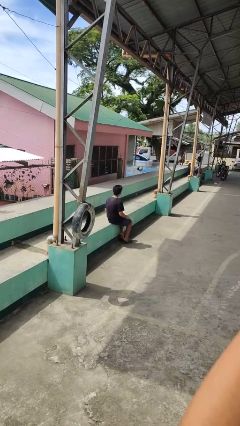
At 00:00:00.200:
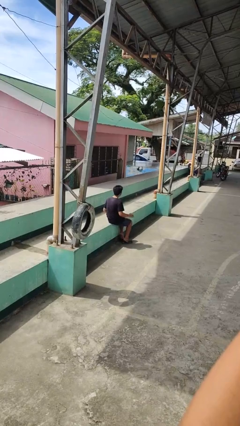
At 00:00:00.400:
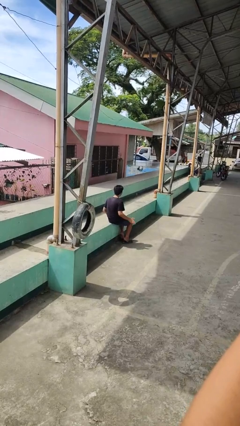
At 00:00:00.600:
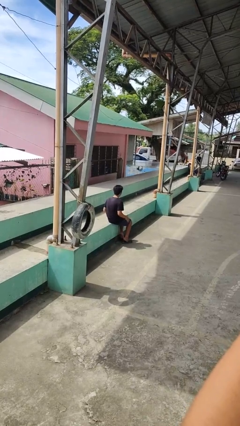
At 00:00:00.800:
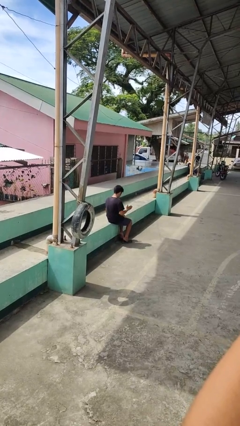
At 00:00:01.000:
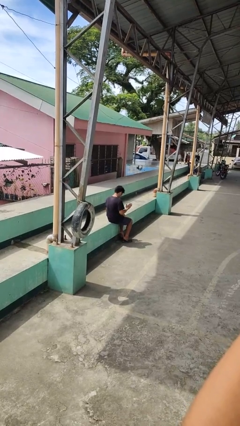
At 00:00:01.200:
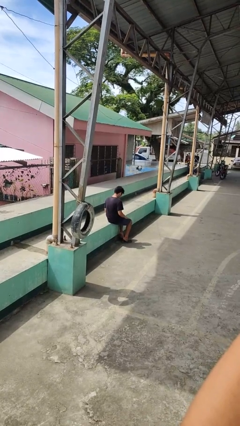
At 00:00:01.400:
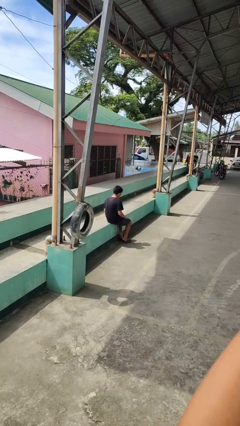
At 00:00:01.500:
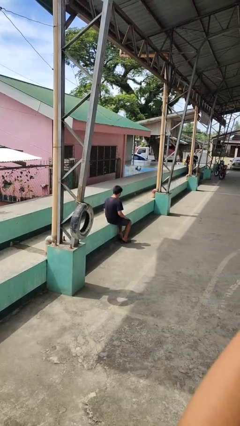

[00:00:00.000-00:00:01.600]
person slaps hands on thighs

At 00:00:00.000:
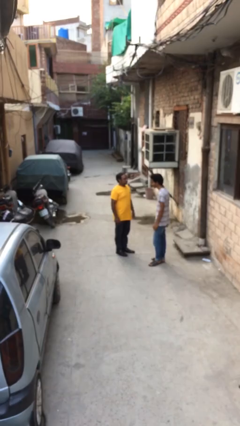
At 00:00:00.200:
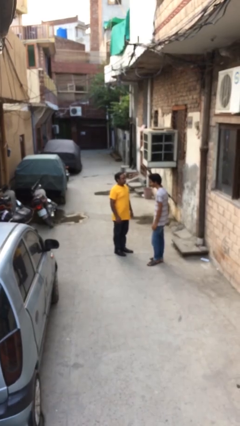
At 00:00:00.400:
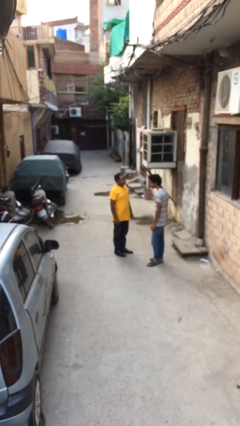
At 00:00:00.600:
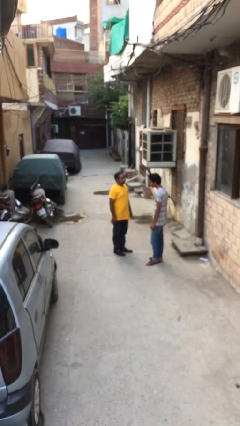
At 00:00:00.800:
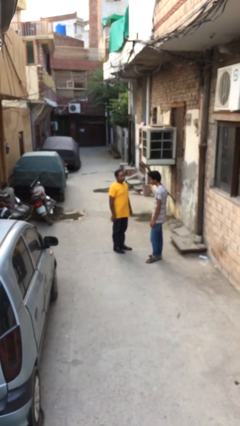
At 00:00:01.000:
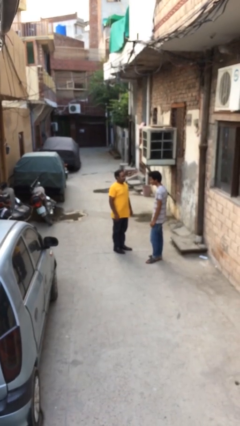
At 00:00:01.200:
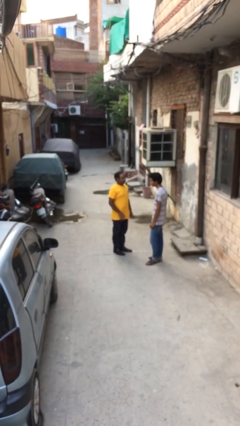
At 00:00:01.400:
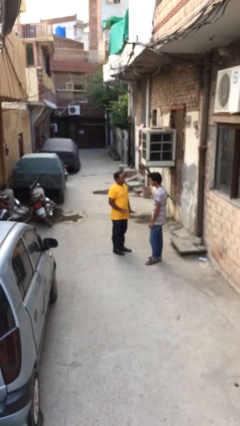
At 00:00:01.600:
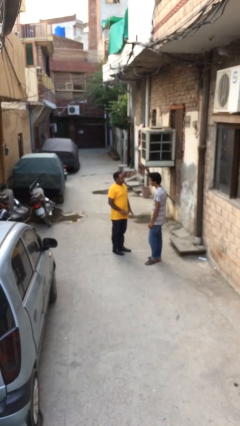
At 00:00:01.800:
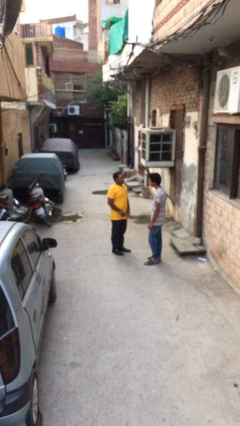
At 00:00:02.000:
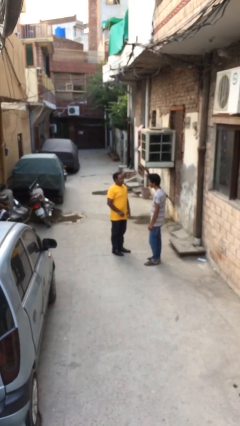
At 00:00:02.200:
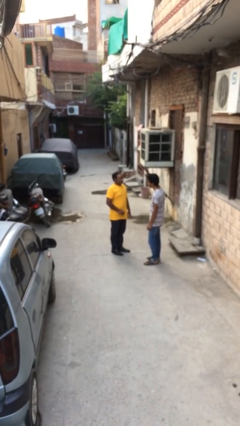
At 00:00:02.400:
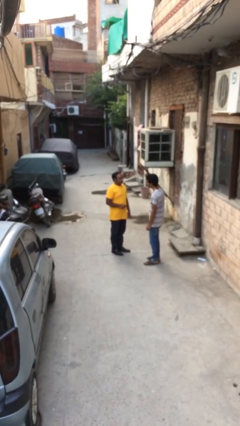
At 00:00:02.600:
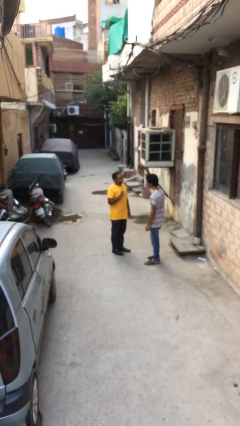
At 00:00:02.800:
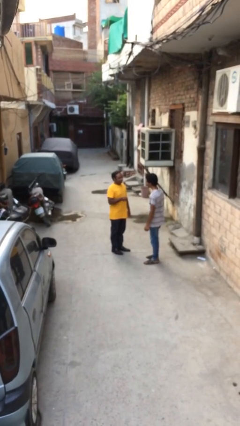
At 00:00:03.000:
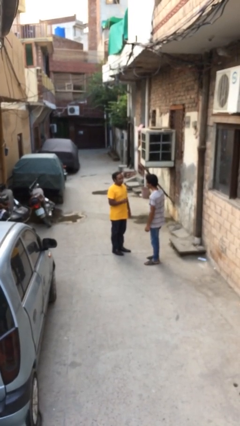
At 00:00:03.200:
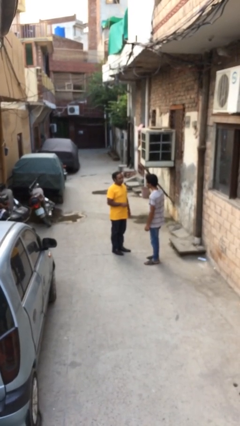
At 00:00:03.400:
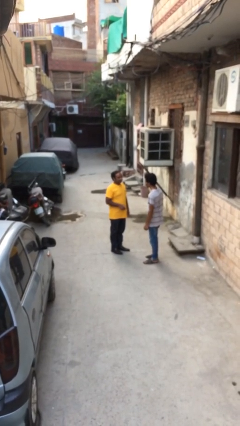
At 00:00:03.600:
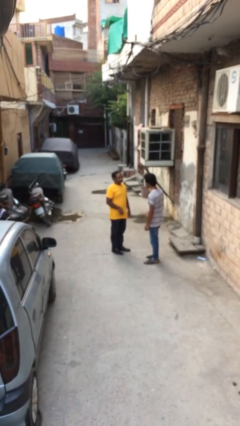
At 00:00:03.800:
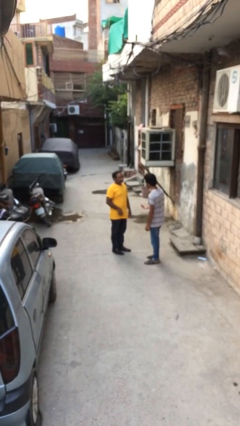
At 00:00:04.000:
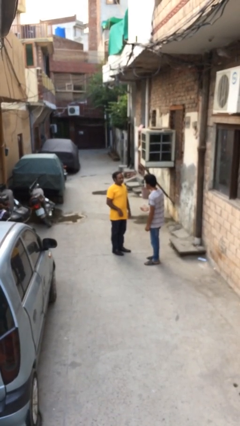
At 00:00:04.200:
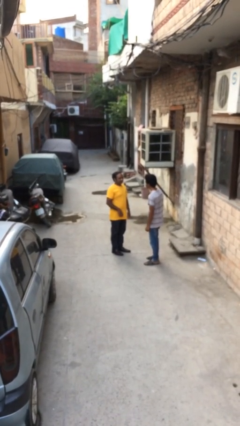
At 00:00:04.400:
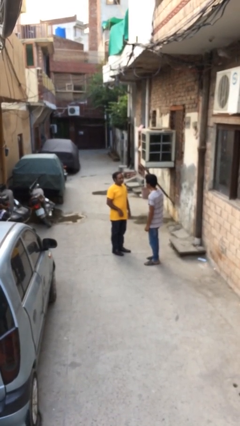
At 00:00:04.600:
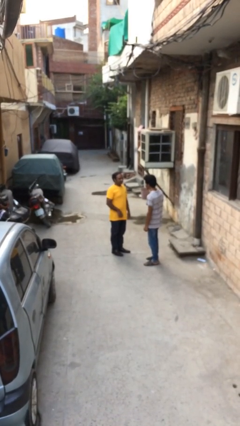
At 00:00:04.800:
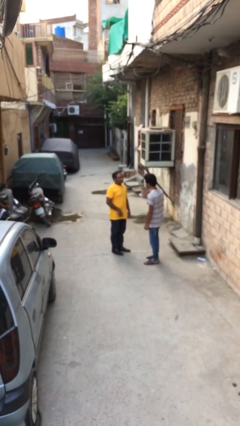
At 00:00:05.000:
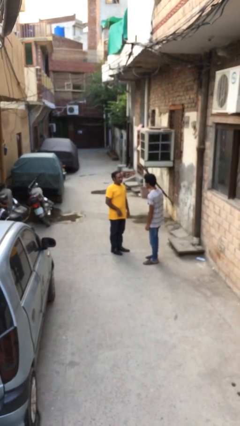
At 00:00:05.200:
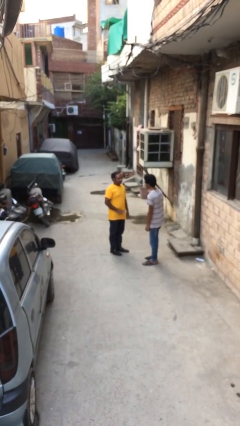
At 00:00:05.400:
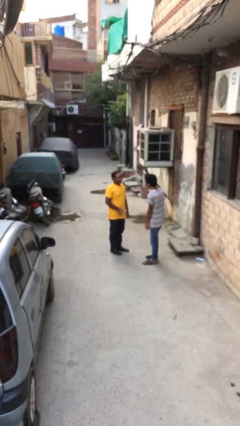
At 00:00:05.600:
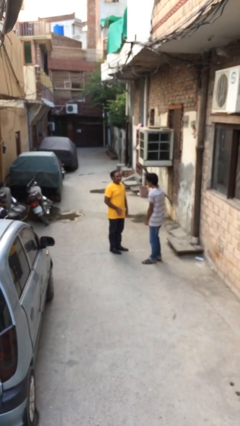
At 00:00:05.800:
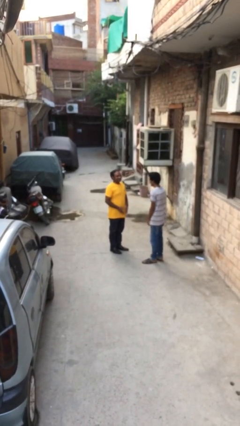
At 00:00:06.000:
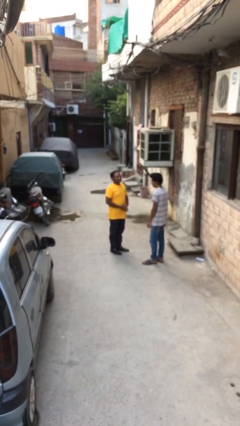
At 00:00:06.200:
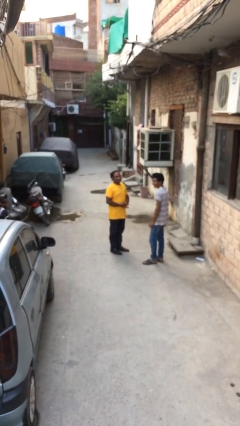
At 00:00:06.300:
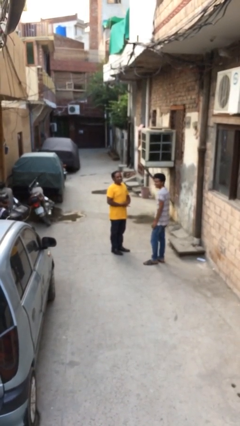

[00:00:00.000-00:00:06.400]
person talks to person

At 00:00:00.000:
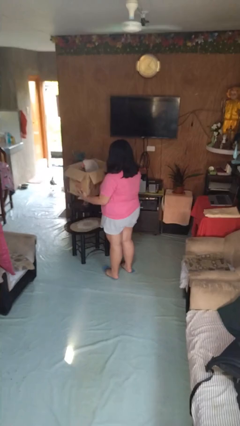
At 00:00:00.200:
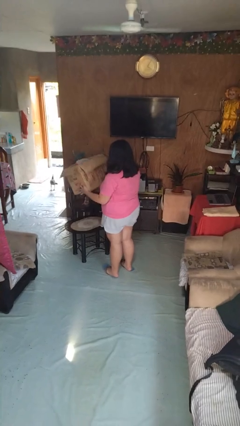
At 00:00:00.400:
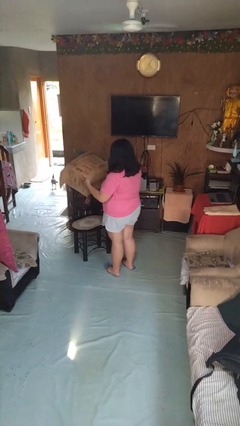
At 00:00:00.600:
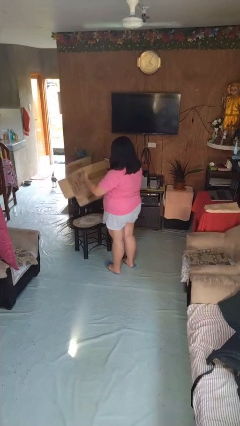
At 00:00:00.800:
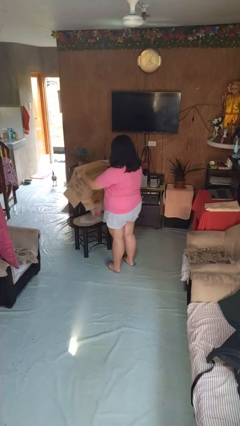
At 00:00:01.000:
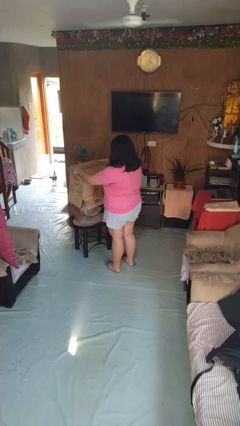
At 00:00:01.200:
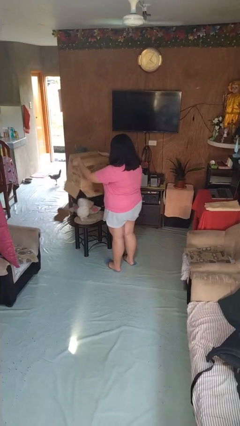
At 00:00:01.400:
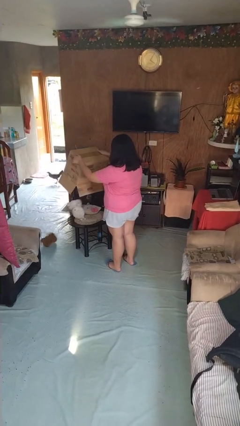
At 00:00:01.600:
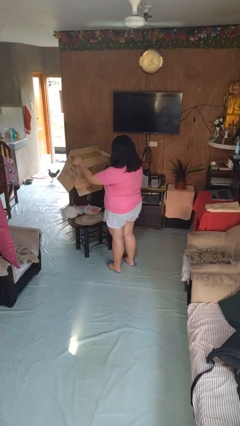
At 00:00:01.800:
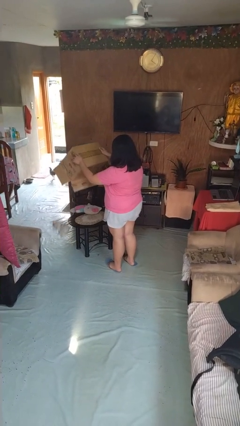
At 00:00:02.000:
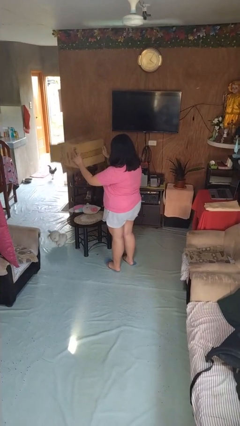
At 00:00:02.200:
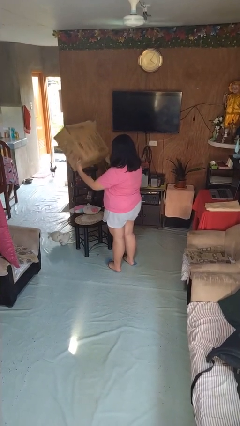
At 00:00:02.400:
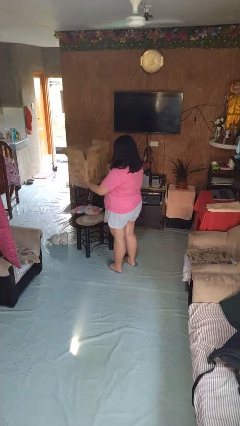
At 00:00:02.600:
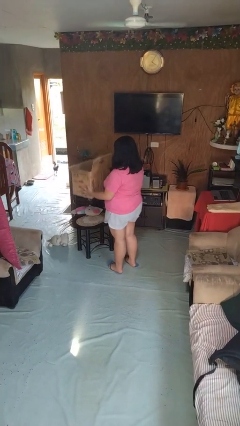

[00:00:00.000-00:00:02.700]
person unloads box onto table

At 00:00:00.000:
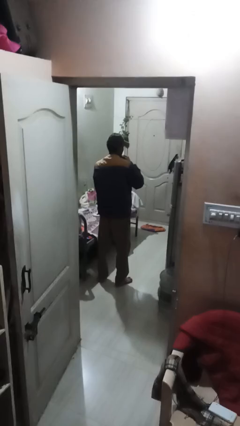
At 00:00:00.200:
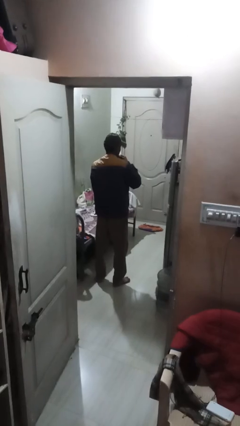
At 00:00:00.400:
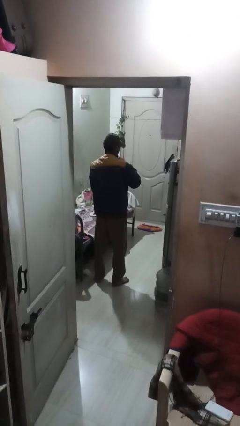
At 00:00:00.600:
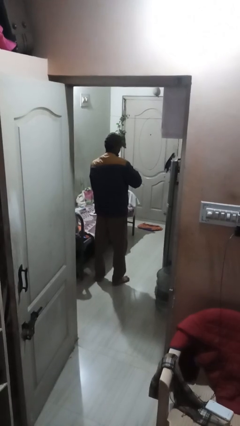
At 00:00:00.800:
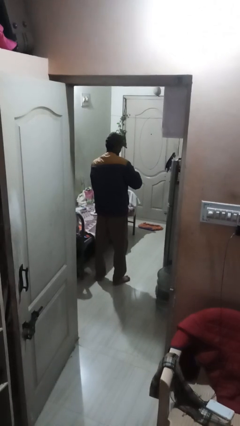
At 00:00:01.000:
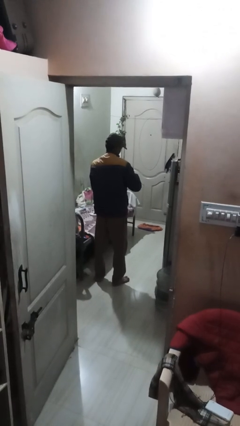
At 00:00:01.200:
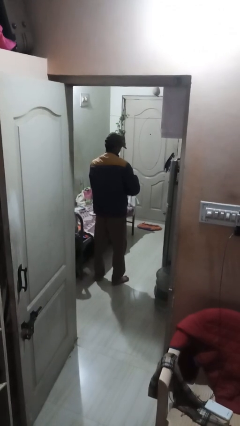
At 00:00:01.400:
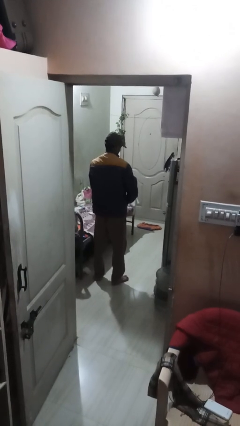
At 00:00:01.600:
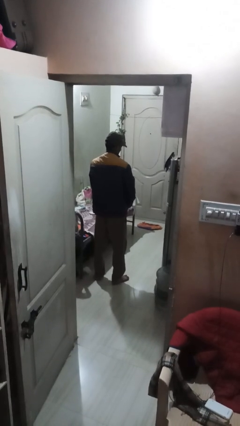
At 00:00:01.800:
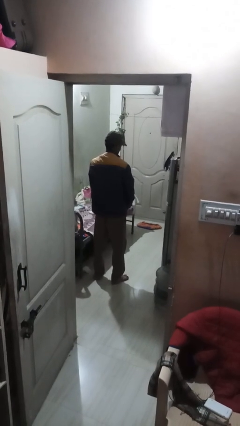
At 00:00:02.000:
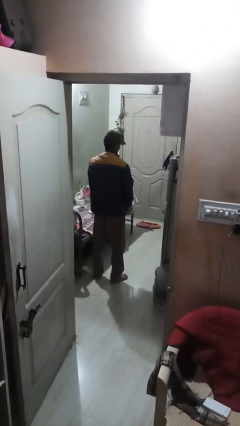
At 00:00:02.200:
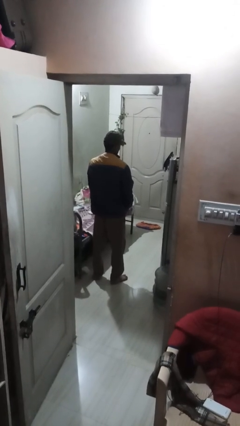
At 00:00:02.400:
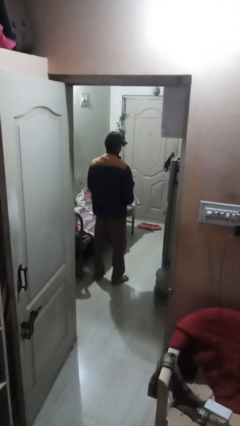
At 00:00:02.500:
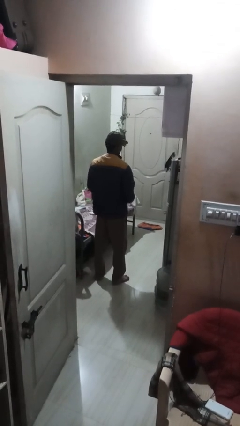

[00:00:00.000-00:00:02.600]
person unzips jacket

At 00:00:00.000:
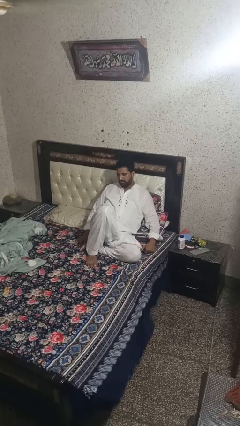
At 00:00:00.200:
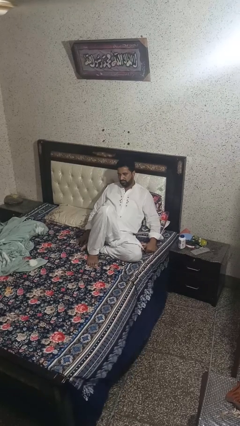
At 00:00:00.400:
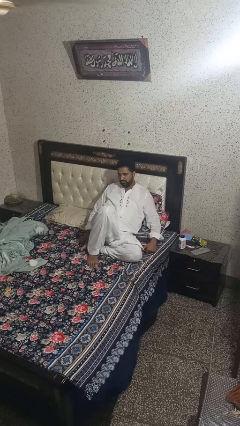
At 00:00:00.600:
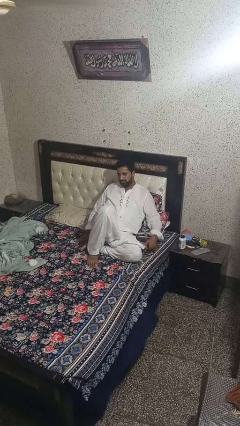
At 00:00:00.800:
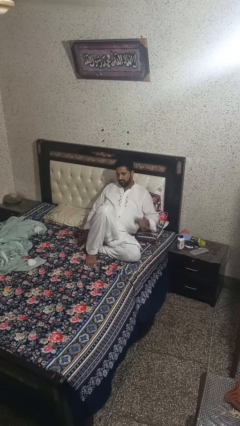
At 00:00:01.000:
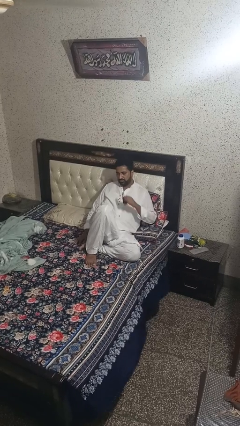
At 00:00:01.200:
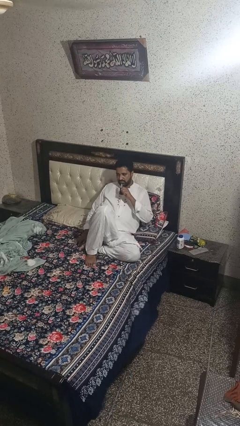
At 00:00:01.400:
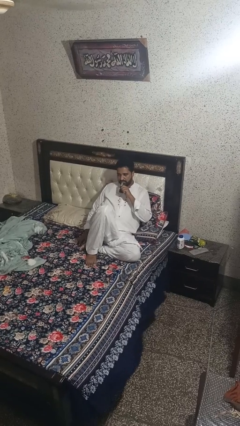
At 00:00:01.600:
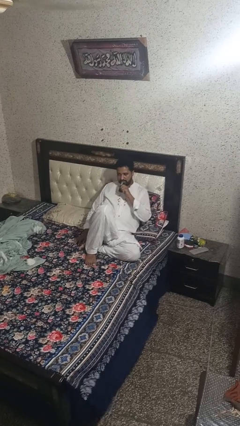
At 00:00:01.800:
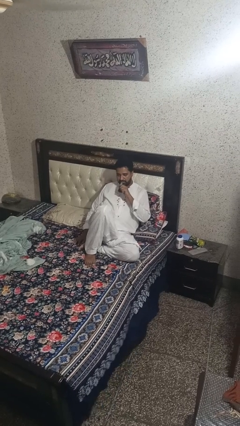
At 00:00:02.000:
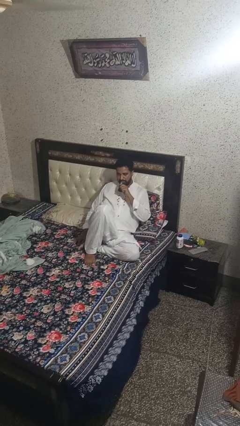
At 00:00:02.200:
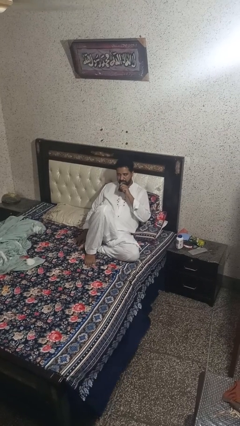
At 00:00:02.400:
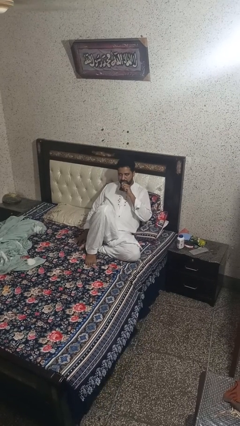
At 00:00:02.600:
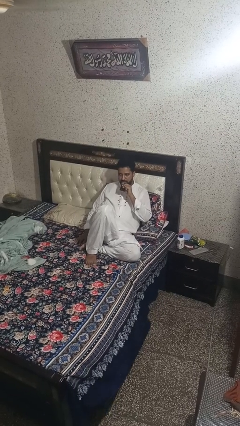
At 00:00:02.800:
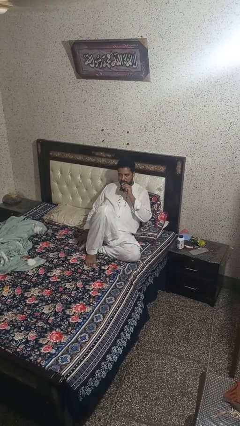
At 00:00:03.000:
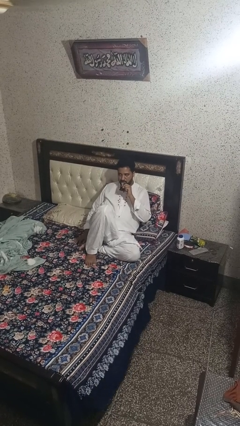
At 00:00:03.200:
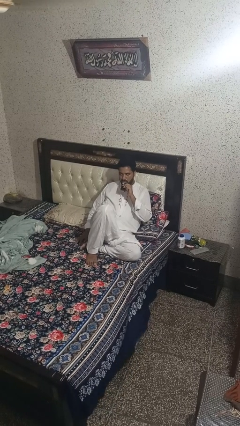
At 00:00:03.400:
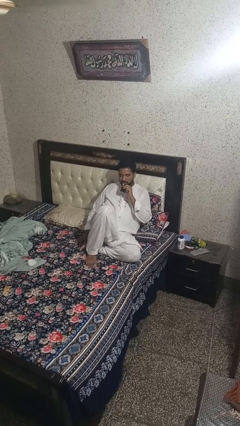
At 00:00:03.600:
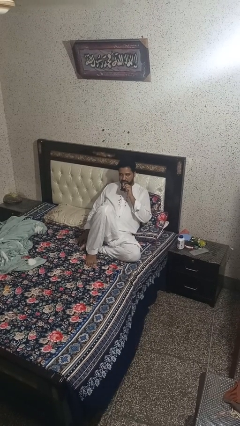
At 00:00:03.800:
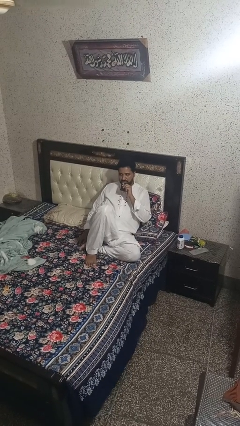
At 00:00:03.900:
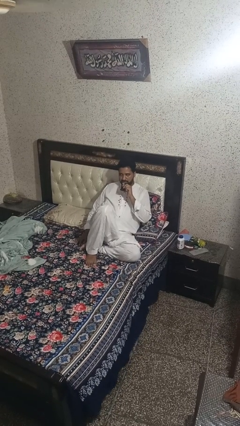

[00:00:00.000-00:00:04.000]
person vapes
